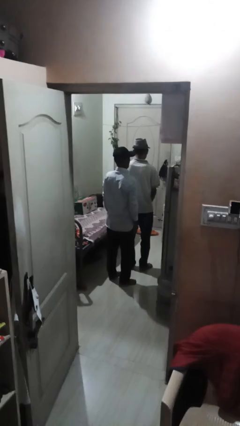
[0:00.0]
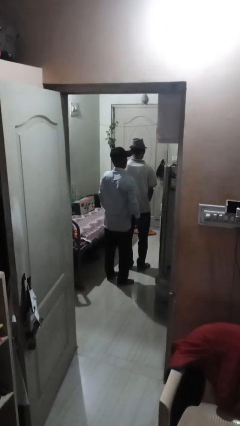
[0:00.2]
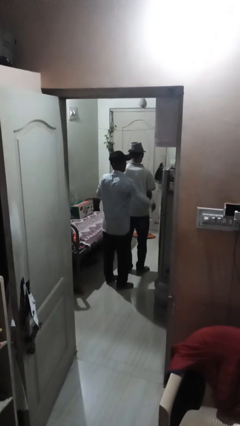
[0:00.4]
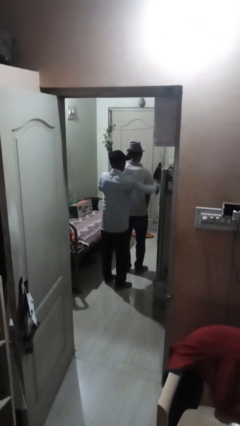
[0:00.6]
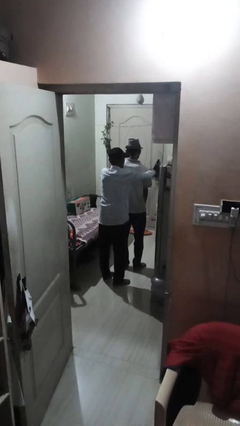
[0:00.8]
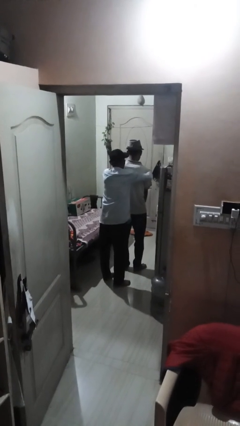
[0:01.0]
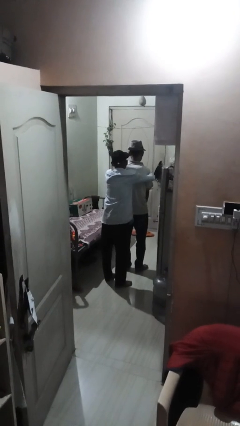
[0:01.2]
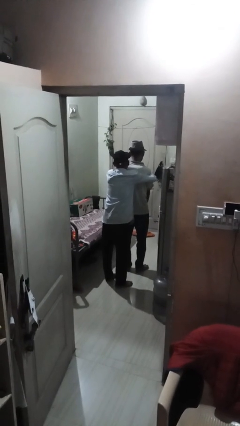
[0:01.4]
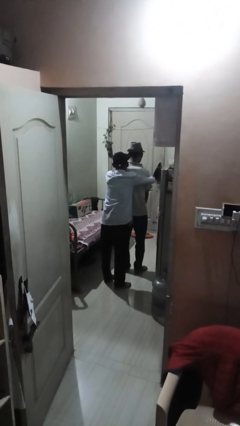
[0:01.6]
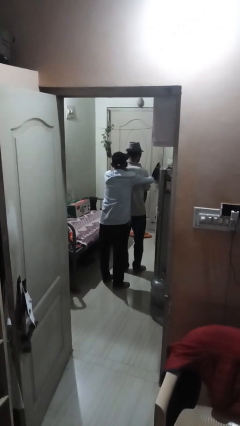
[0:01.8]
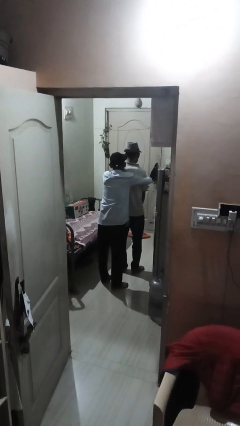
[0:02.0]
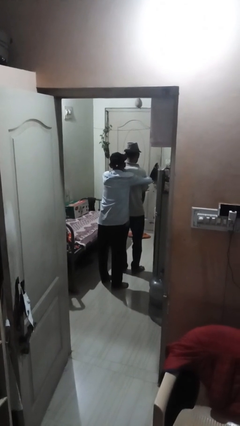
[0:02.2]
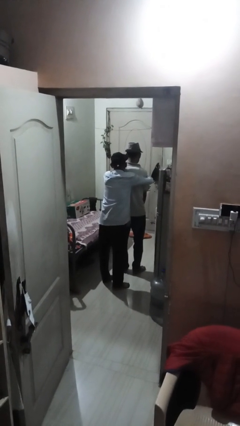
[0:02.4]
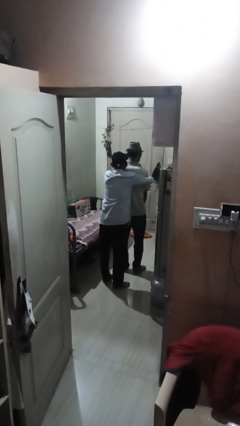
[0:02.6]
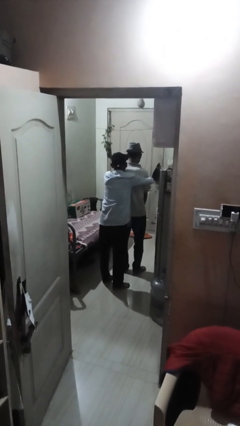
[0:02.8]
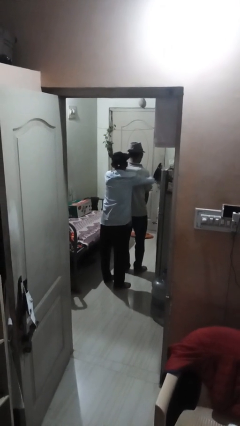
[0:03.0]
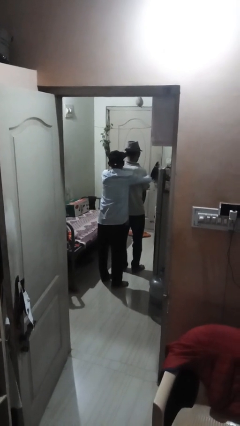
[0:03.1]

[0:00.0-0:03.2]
person hugs person from behind

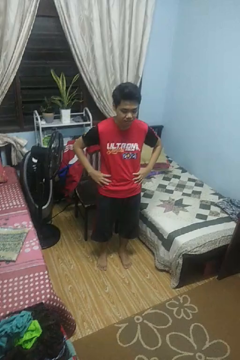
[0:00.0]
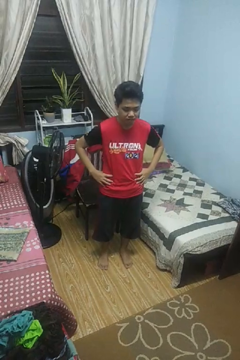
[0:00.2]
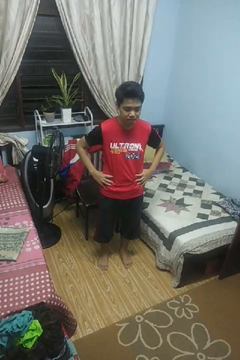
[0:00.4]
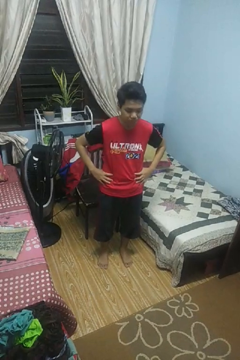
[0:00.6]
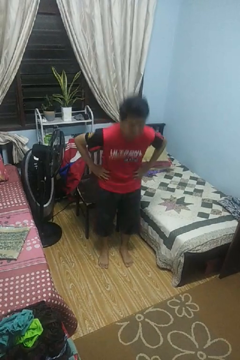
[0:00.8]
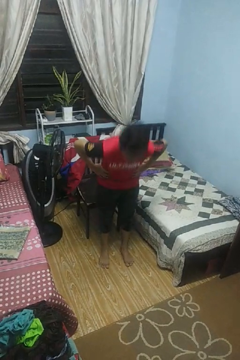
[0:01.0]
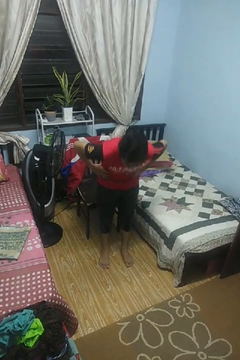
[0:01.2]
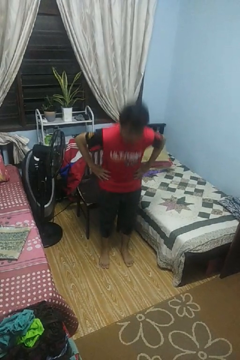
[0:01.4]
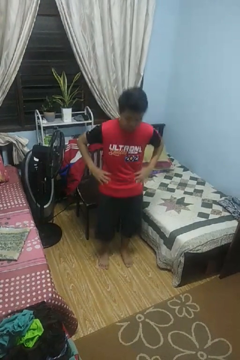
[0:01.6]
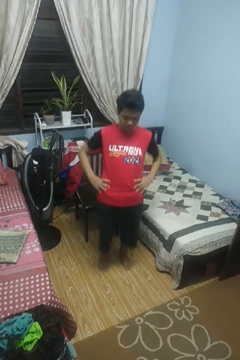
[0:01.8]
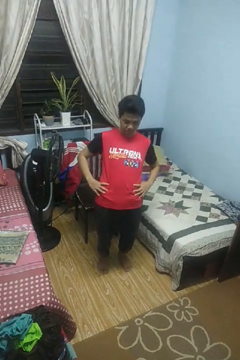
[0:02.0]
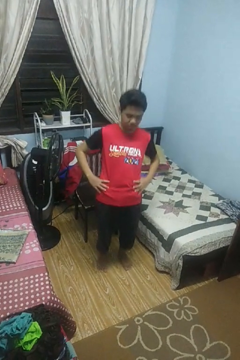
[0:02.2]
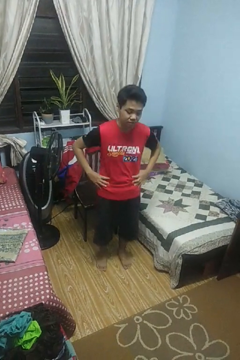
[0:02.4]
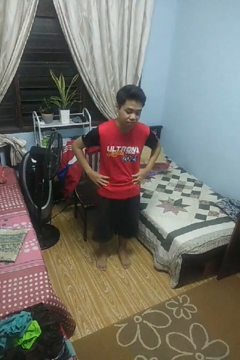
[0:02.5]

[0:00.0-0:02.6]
person wiggles hips

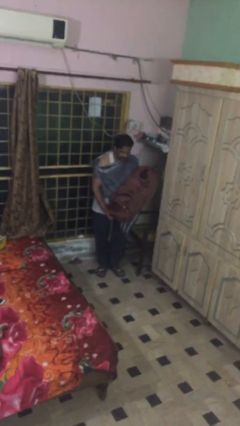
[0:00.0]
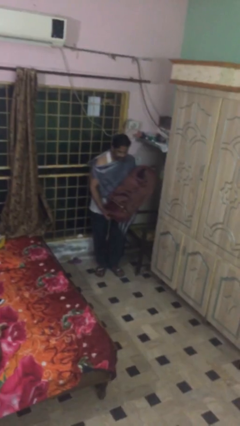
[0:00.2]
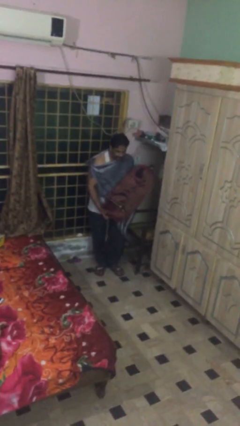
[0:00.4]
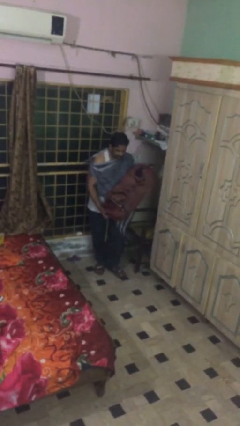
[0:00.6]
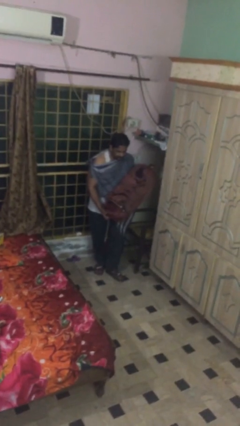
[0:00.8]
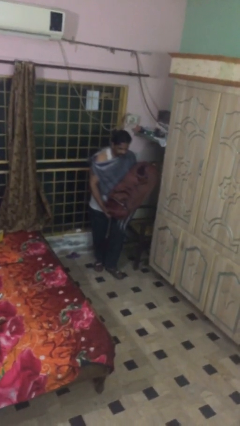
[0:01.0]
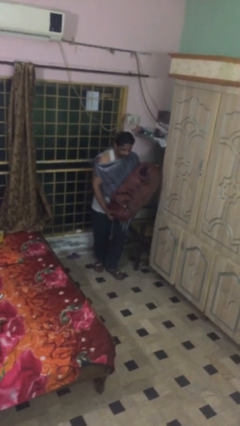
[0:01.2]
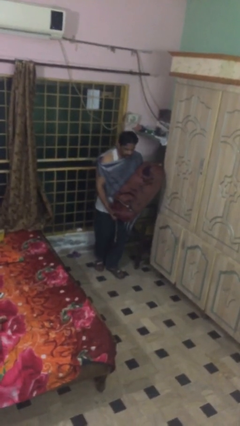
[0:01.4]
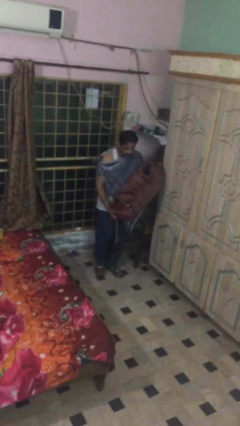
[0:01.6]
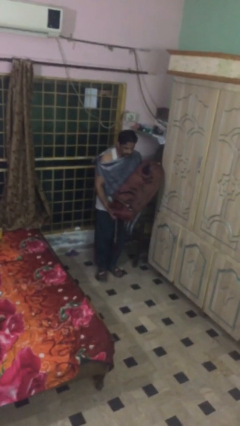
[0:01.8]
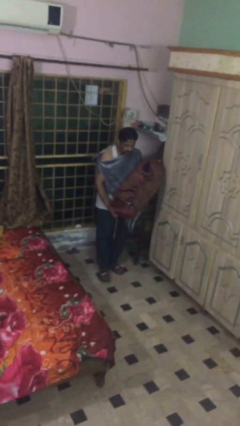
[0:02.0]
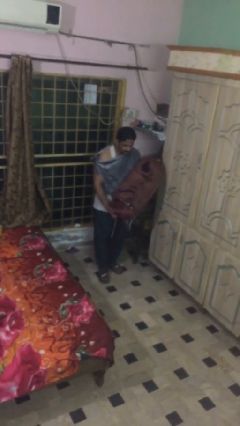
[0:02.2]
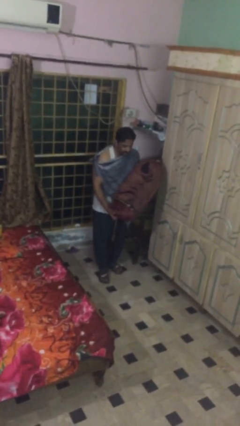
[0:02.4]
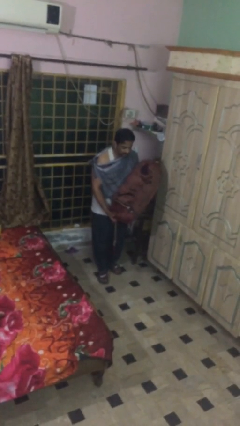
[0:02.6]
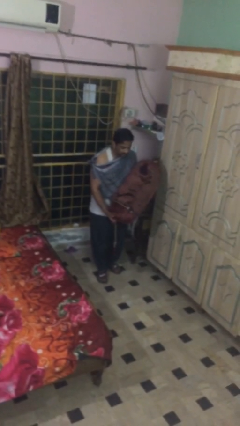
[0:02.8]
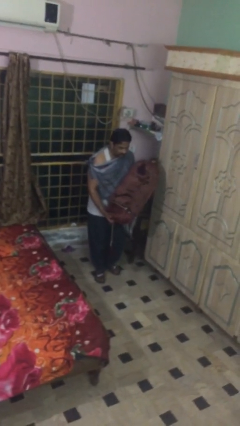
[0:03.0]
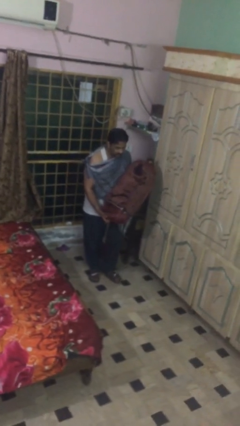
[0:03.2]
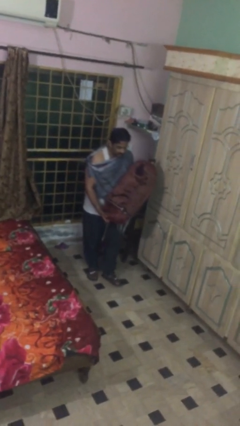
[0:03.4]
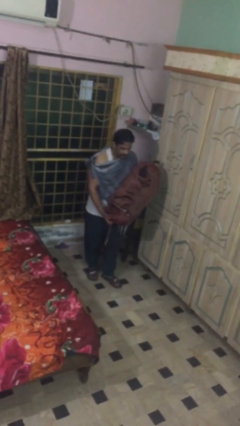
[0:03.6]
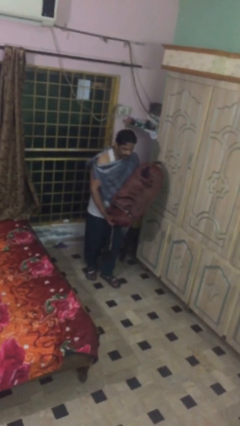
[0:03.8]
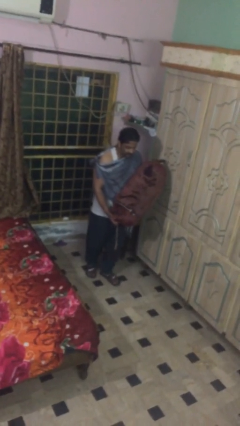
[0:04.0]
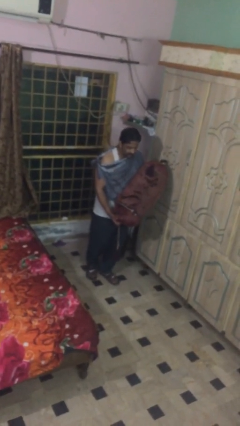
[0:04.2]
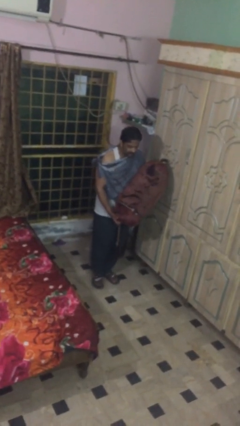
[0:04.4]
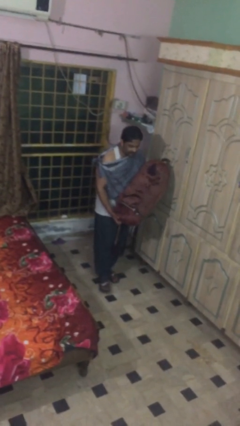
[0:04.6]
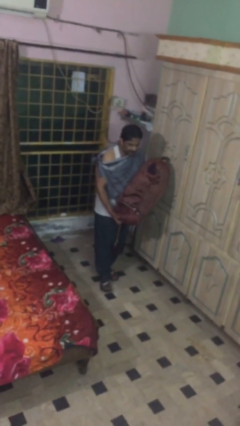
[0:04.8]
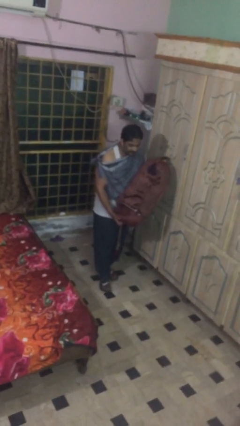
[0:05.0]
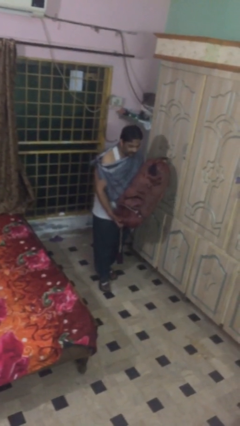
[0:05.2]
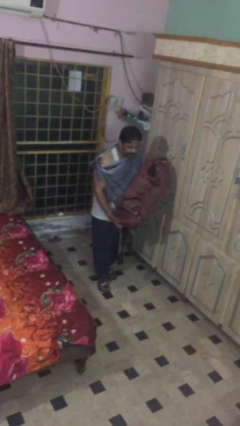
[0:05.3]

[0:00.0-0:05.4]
person carries heavy object

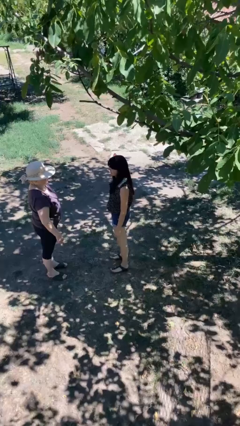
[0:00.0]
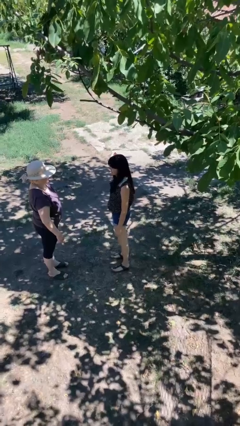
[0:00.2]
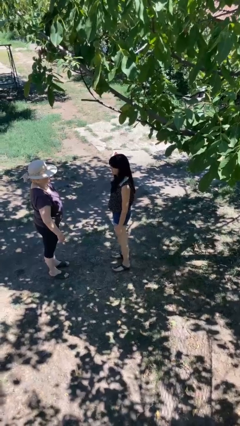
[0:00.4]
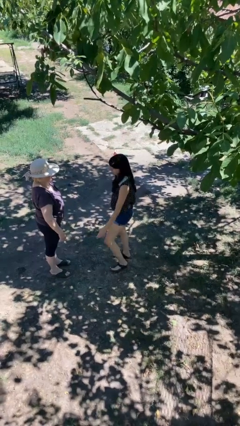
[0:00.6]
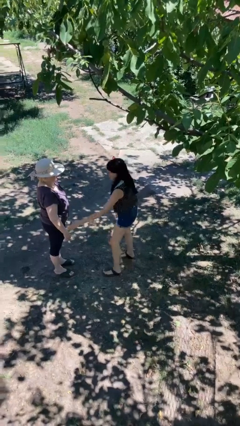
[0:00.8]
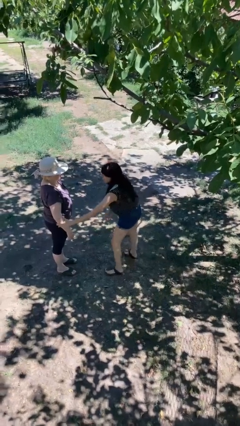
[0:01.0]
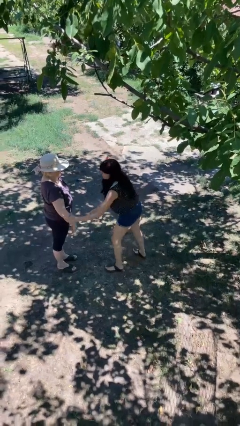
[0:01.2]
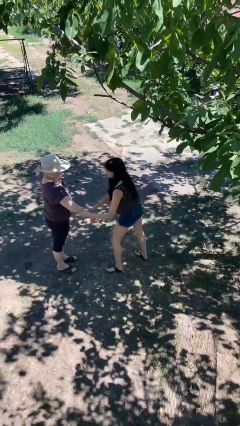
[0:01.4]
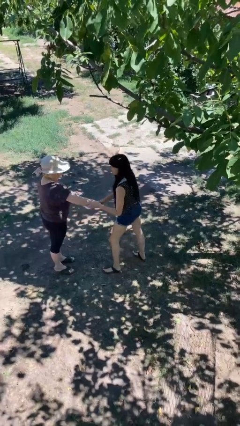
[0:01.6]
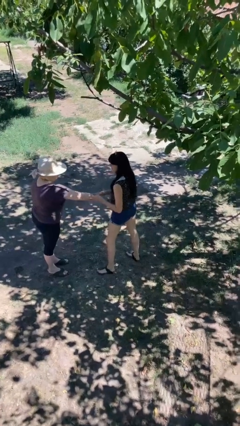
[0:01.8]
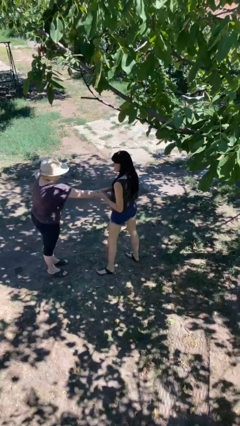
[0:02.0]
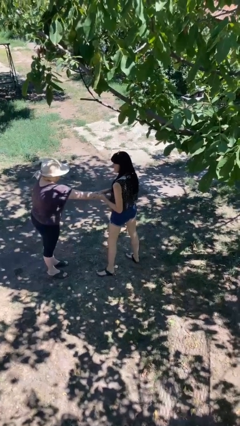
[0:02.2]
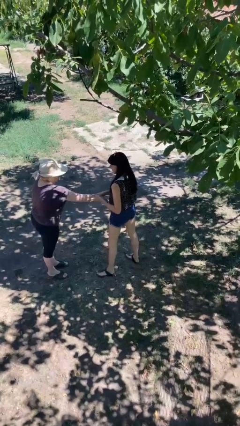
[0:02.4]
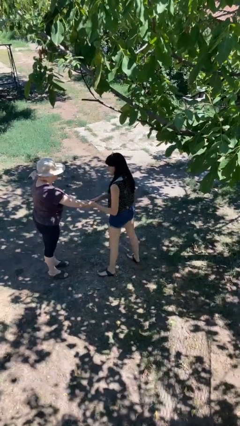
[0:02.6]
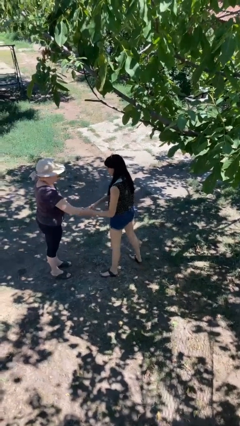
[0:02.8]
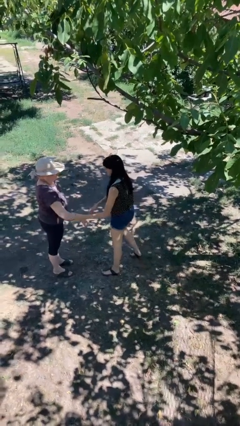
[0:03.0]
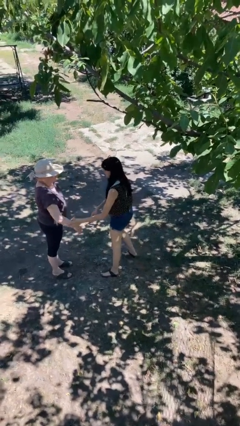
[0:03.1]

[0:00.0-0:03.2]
person grabs person by forearm

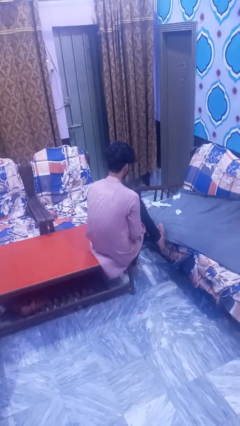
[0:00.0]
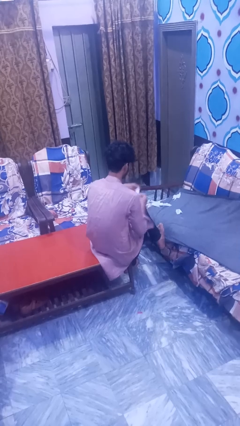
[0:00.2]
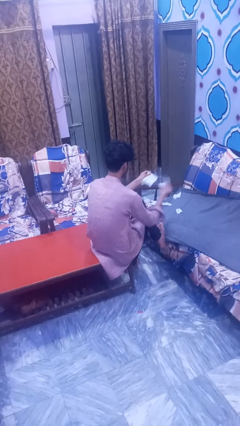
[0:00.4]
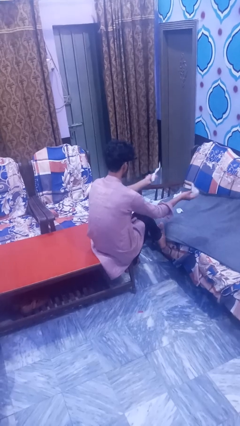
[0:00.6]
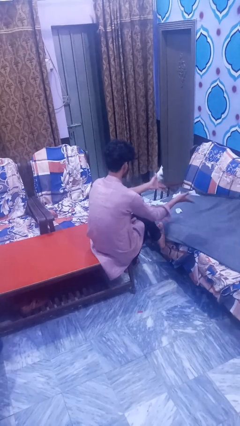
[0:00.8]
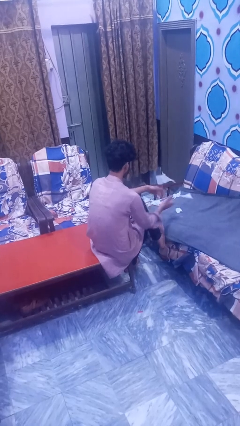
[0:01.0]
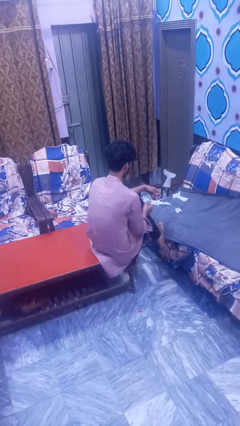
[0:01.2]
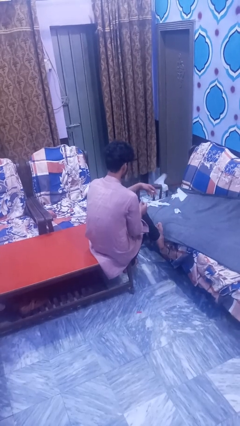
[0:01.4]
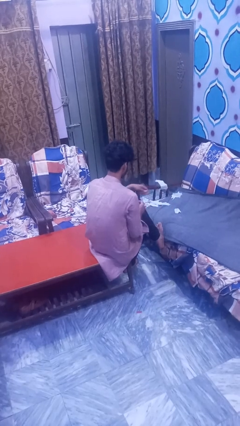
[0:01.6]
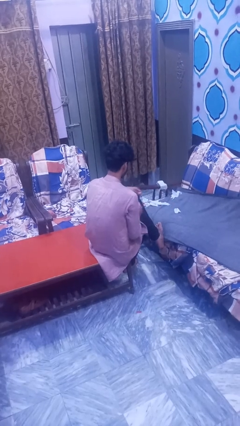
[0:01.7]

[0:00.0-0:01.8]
person tears paper

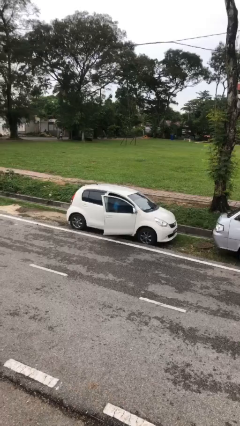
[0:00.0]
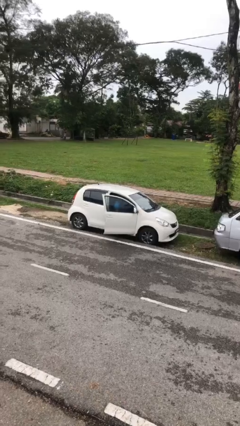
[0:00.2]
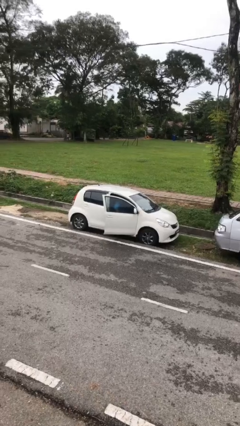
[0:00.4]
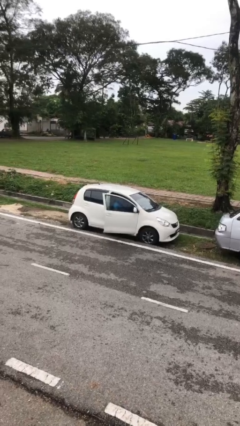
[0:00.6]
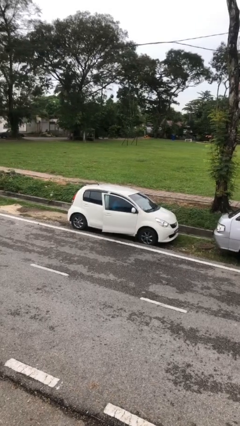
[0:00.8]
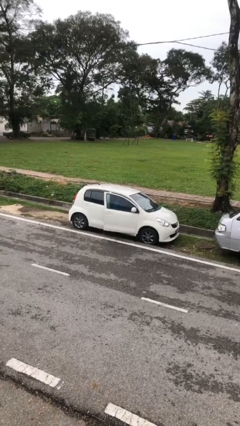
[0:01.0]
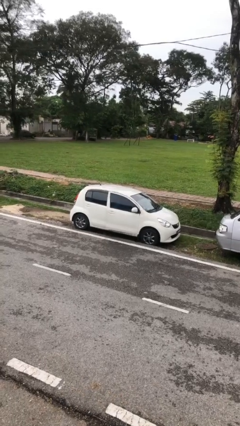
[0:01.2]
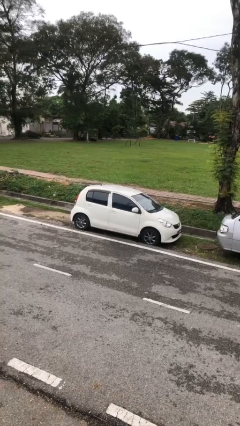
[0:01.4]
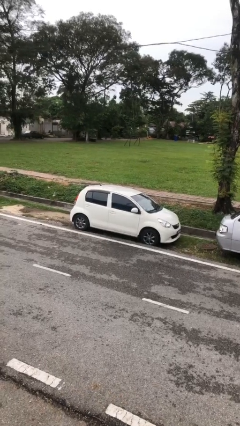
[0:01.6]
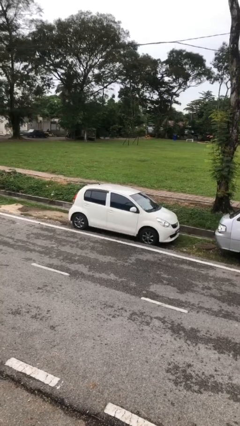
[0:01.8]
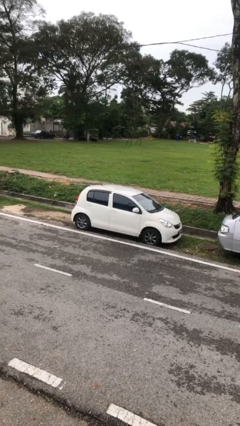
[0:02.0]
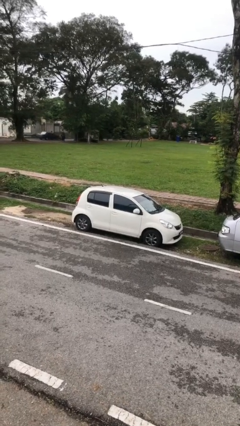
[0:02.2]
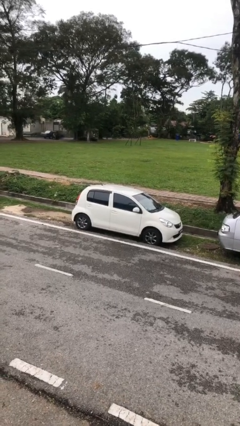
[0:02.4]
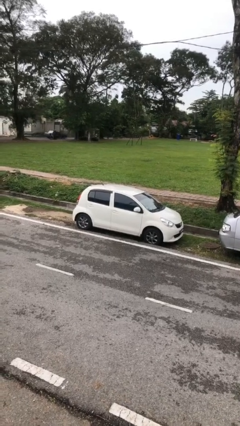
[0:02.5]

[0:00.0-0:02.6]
person closes car door
